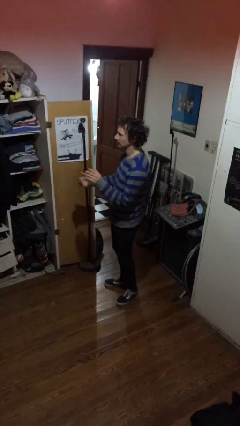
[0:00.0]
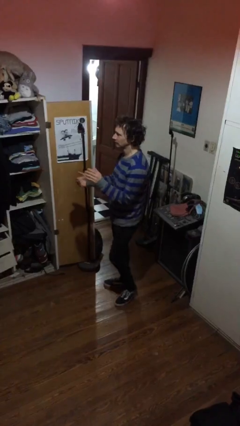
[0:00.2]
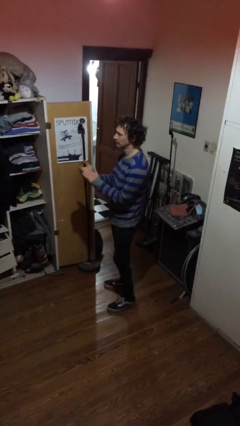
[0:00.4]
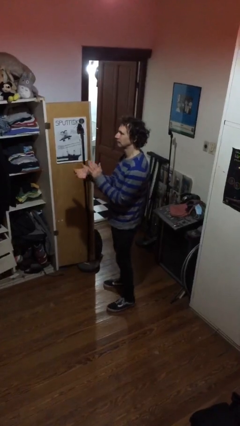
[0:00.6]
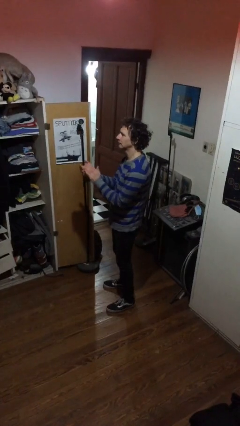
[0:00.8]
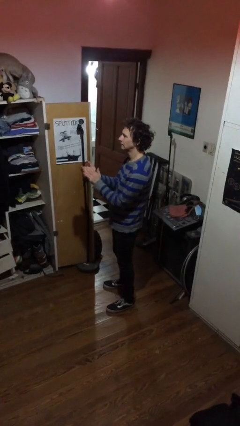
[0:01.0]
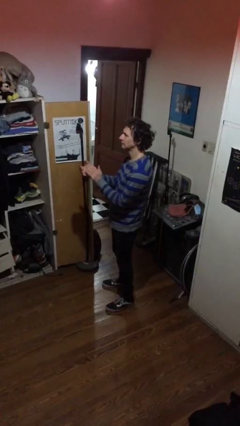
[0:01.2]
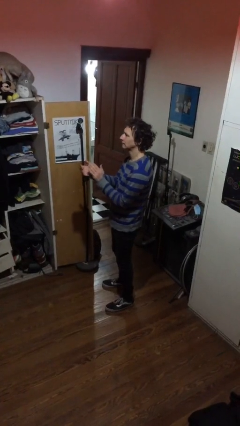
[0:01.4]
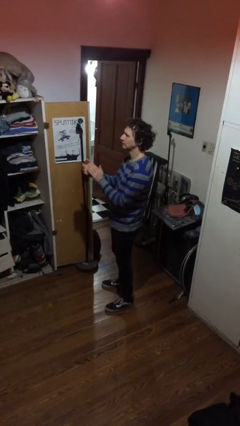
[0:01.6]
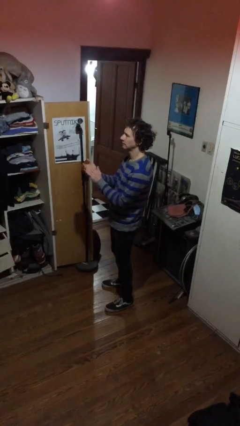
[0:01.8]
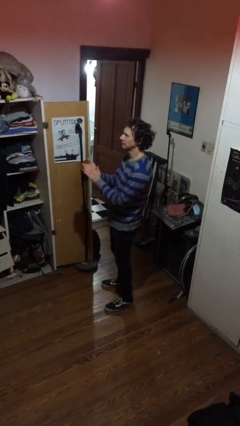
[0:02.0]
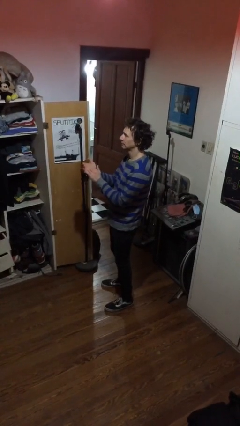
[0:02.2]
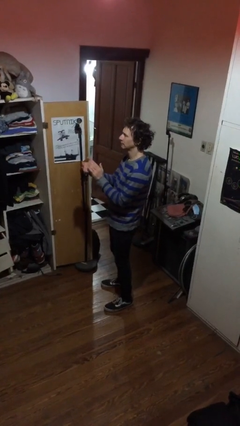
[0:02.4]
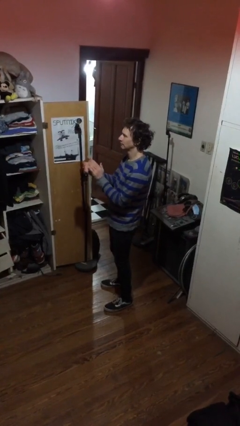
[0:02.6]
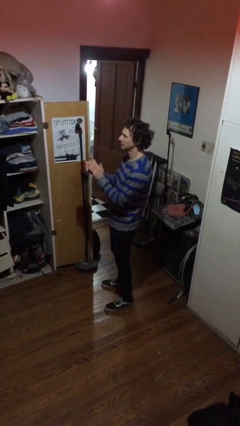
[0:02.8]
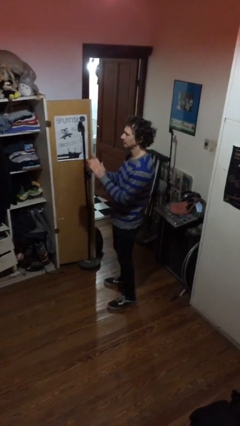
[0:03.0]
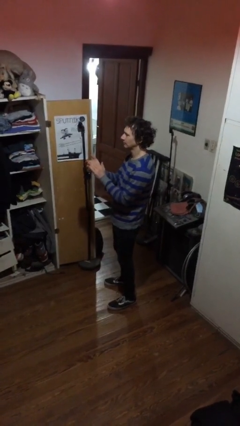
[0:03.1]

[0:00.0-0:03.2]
person claps hands

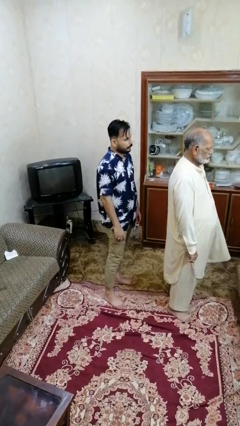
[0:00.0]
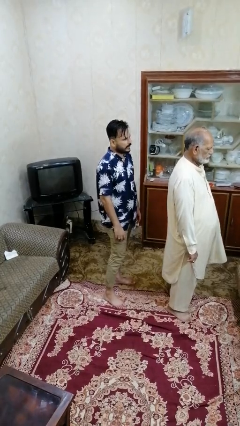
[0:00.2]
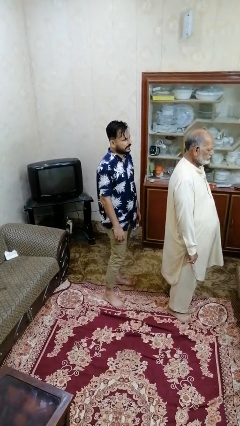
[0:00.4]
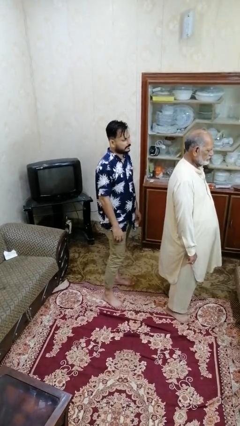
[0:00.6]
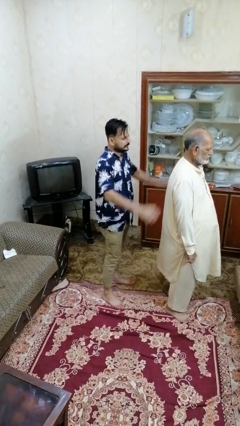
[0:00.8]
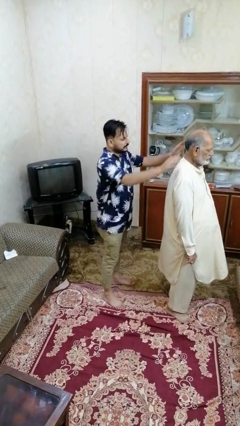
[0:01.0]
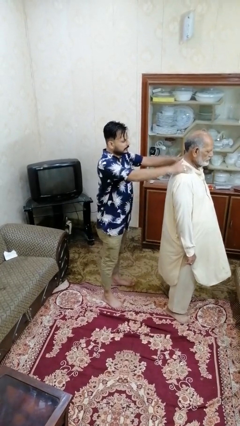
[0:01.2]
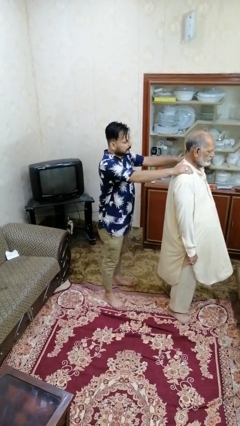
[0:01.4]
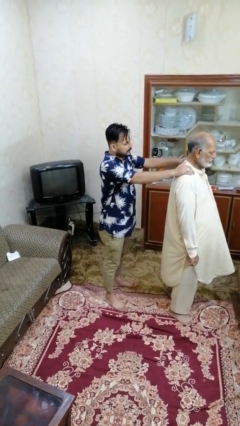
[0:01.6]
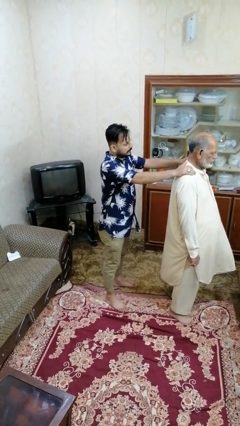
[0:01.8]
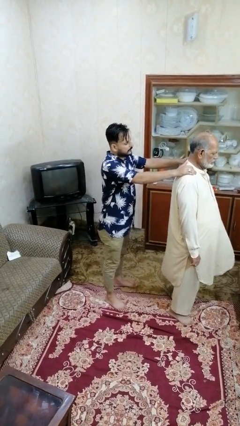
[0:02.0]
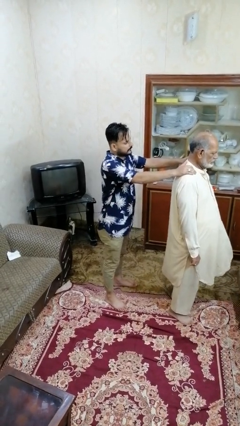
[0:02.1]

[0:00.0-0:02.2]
person grabs person by shoulder

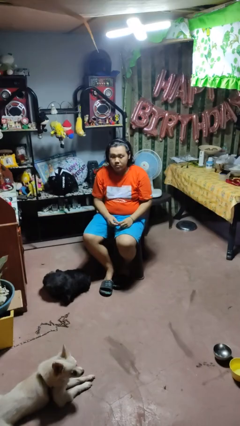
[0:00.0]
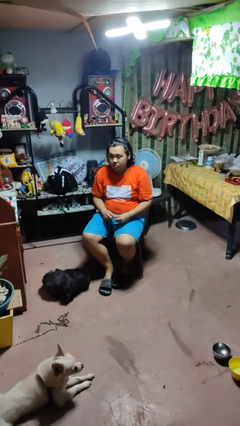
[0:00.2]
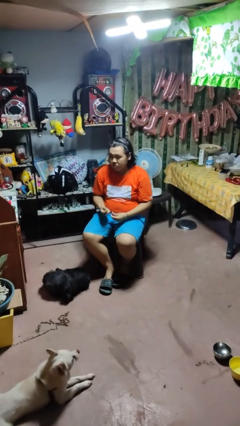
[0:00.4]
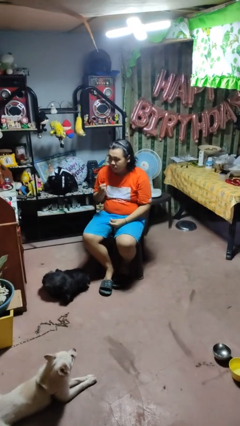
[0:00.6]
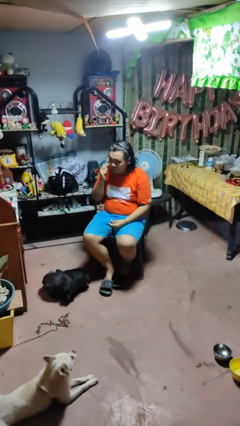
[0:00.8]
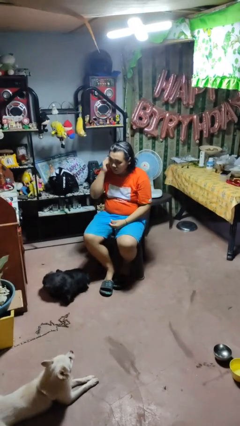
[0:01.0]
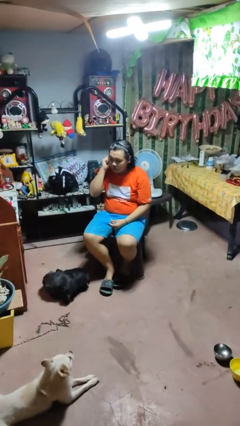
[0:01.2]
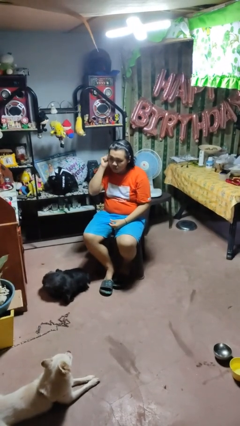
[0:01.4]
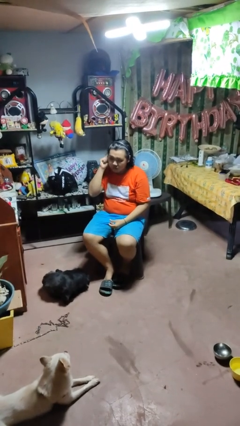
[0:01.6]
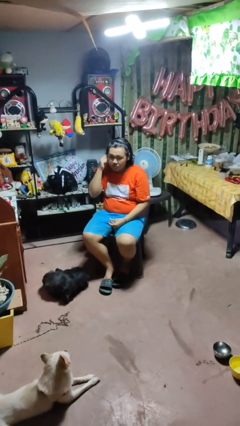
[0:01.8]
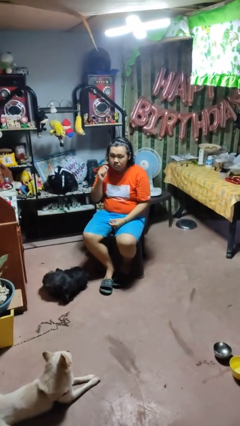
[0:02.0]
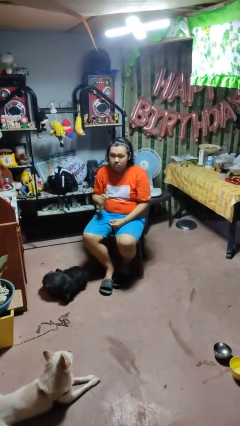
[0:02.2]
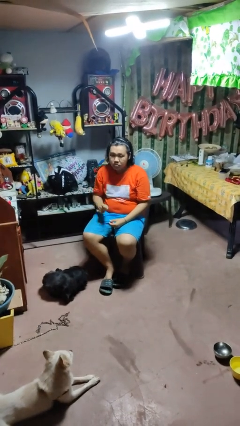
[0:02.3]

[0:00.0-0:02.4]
person puts on earrings

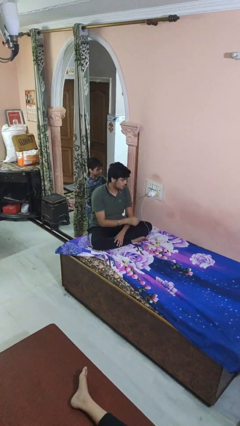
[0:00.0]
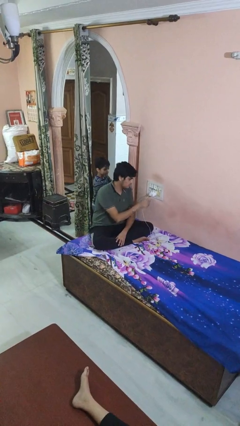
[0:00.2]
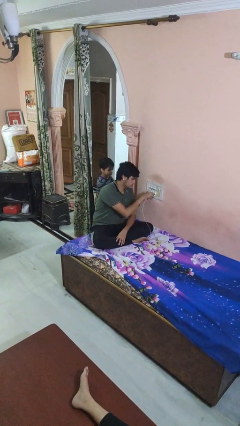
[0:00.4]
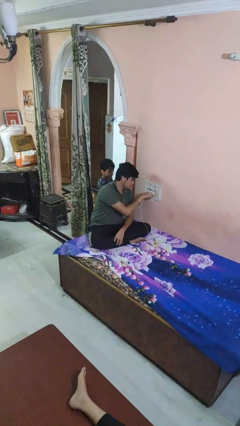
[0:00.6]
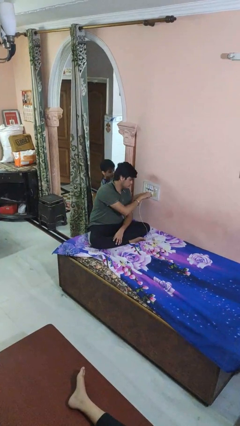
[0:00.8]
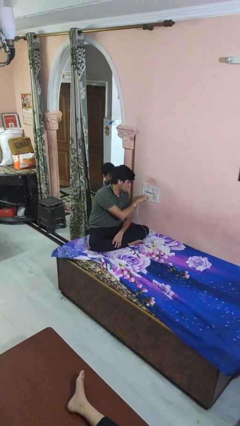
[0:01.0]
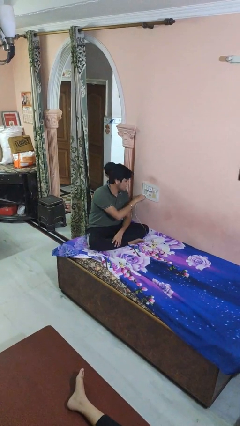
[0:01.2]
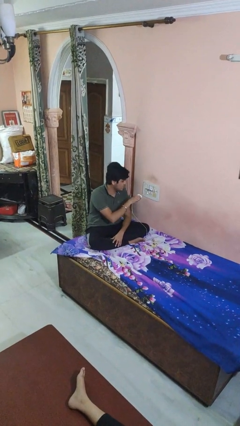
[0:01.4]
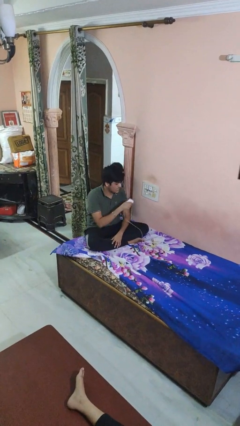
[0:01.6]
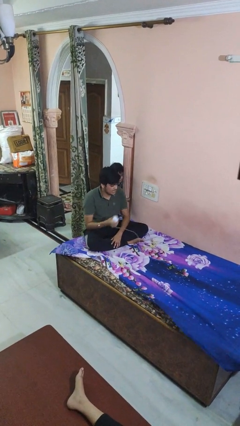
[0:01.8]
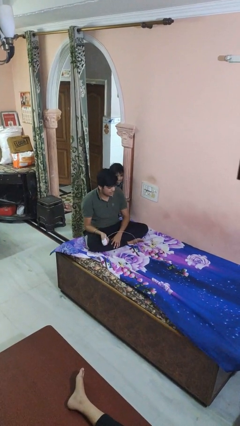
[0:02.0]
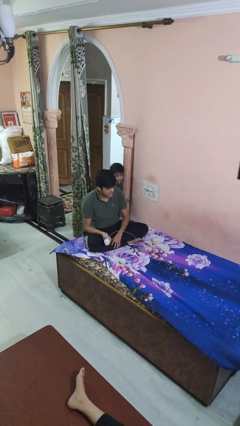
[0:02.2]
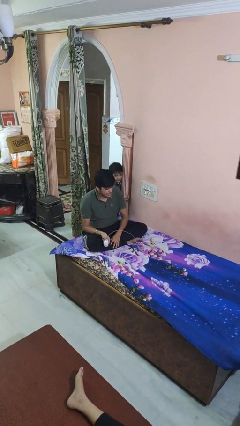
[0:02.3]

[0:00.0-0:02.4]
person unplugs from electrical socket

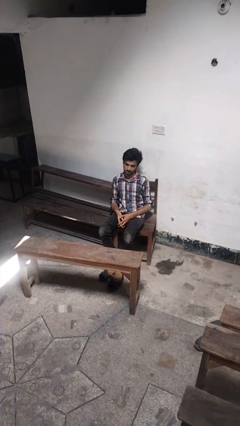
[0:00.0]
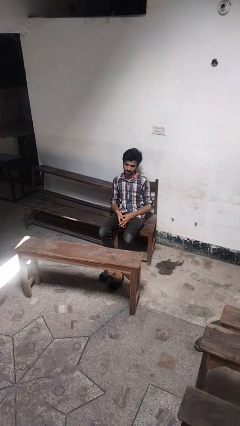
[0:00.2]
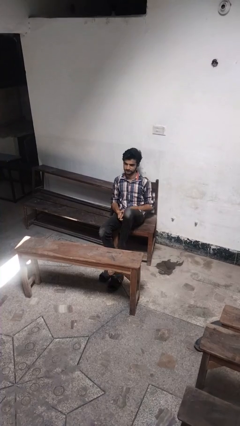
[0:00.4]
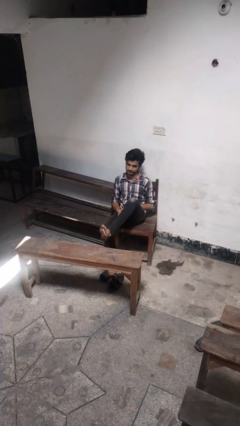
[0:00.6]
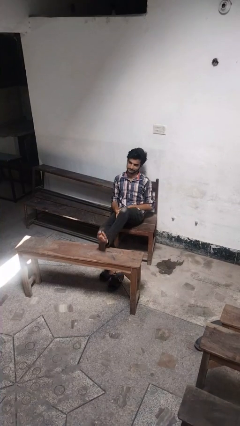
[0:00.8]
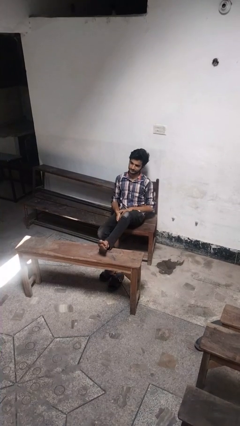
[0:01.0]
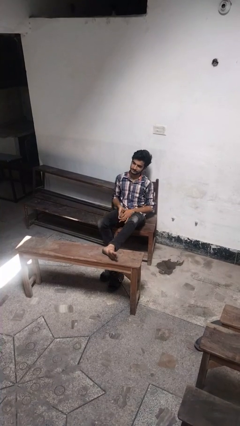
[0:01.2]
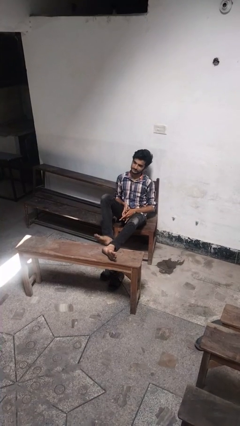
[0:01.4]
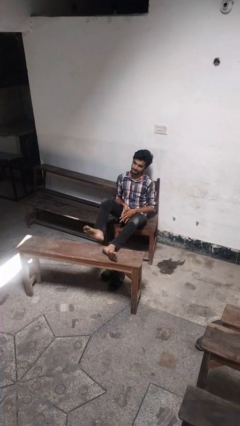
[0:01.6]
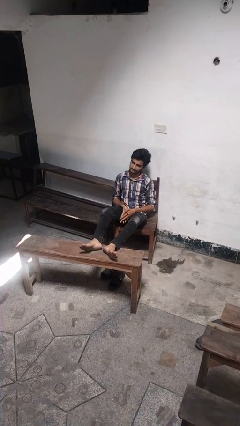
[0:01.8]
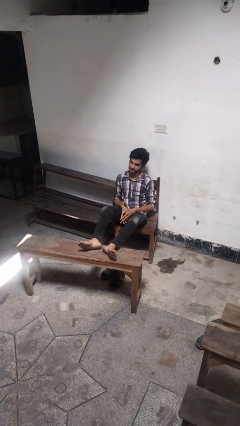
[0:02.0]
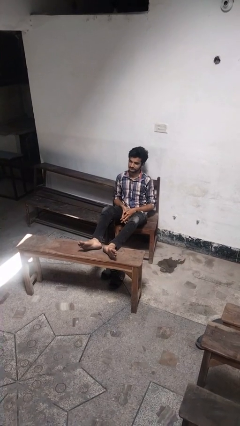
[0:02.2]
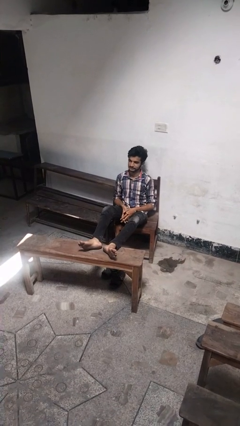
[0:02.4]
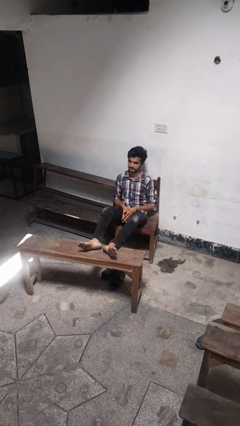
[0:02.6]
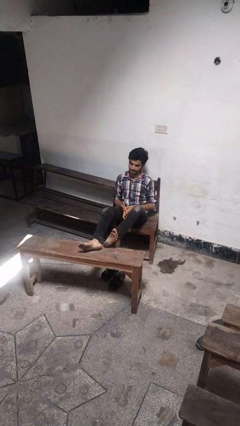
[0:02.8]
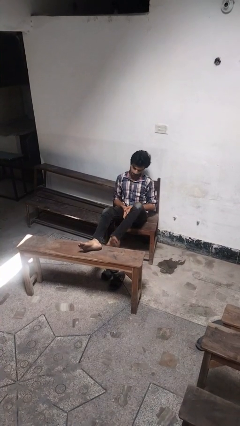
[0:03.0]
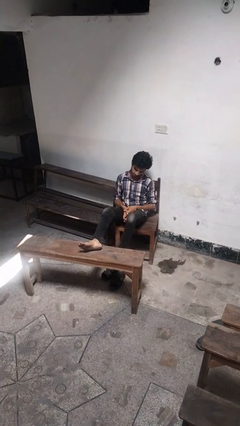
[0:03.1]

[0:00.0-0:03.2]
person puts feet up

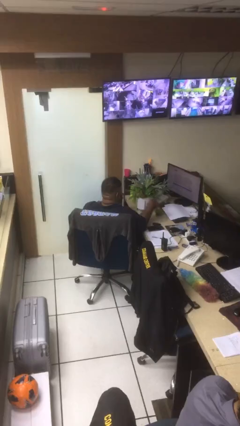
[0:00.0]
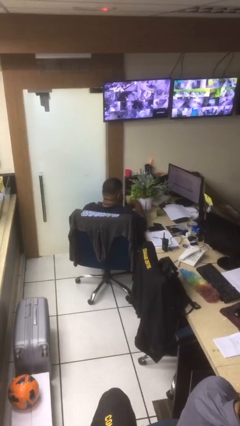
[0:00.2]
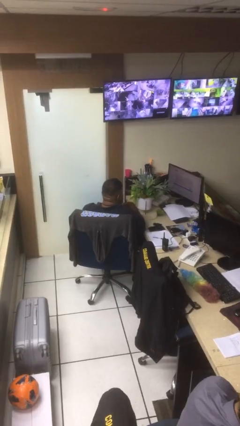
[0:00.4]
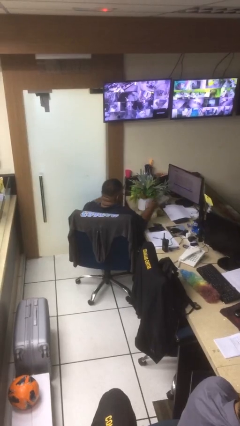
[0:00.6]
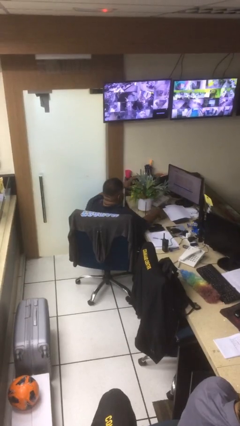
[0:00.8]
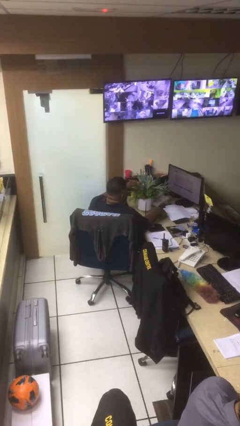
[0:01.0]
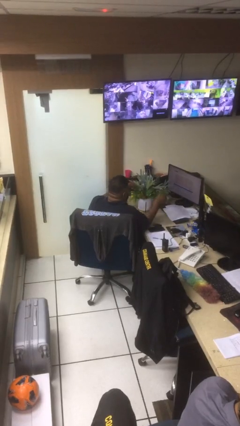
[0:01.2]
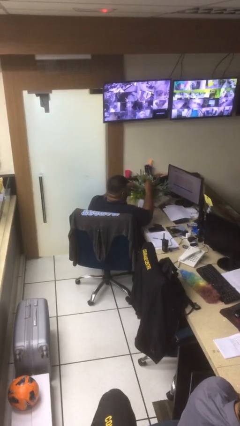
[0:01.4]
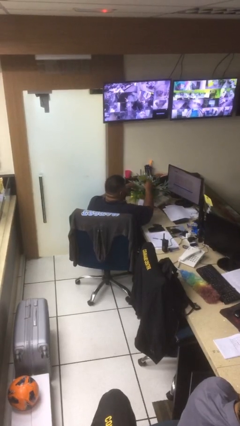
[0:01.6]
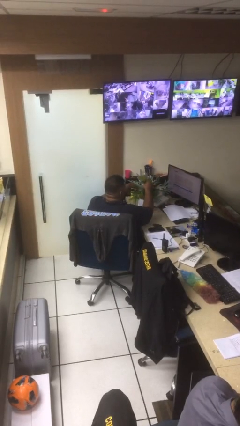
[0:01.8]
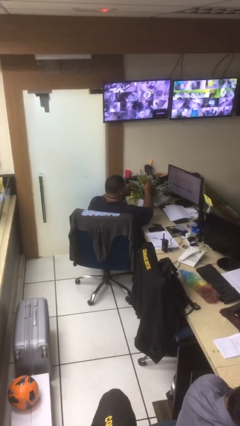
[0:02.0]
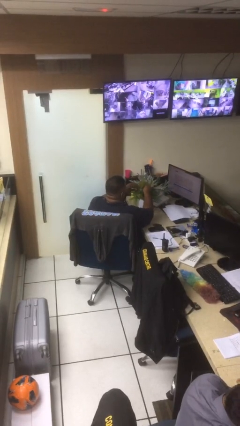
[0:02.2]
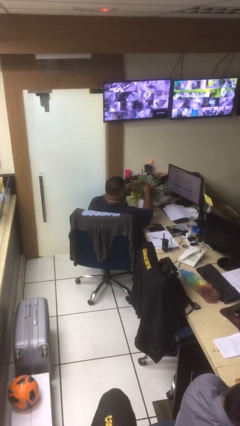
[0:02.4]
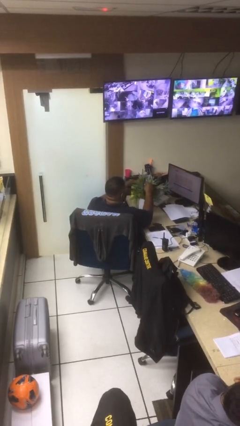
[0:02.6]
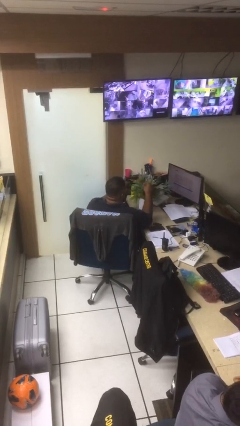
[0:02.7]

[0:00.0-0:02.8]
person arranges flowers in vase

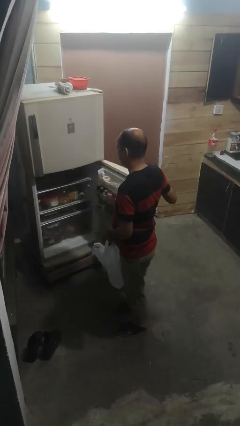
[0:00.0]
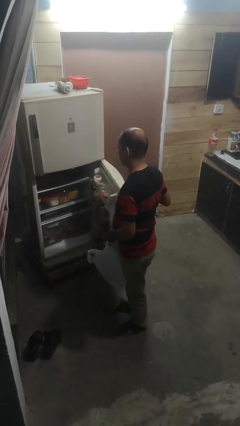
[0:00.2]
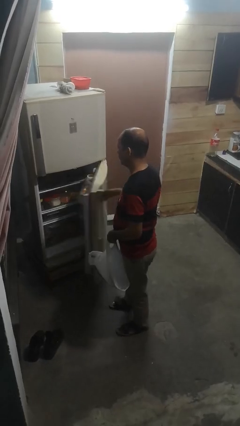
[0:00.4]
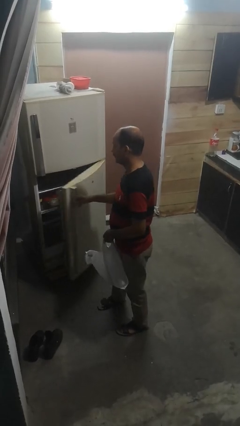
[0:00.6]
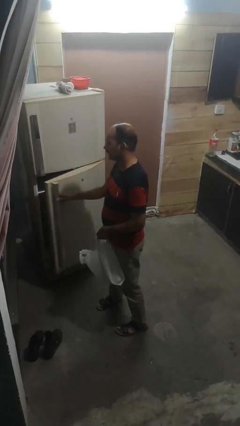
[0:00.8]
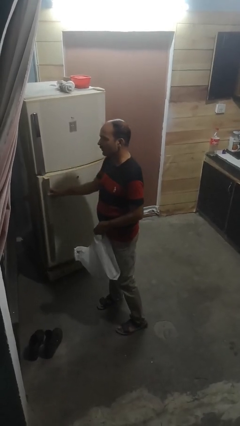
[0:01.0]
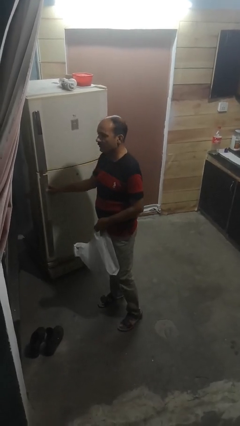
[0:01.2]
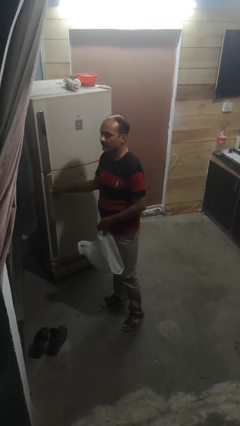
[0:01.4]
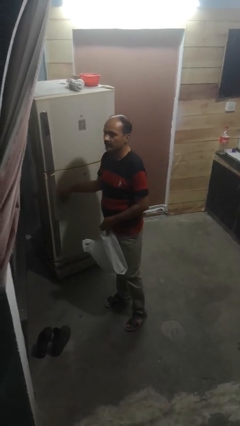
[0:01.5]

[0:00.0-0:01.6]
person loads groceries into refrigerator
